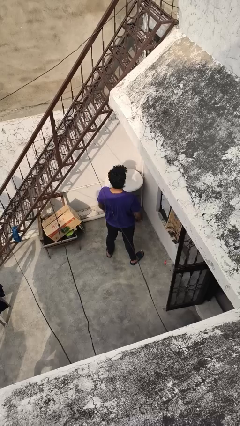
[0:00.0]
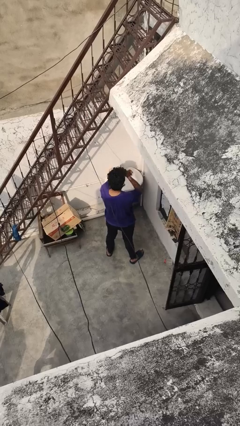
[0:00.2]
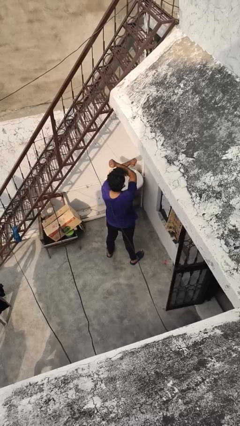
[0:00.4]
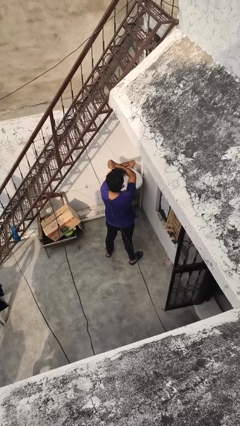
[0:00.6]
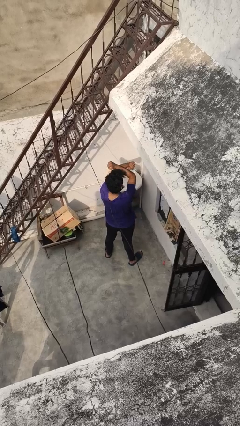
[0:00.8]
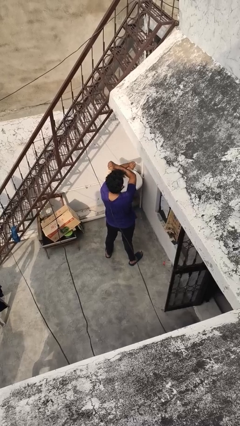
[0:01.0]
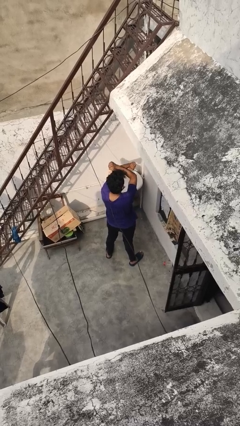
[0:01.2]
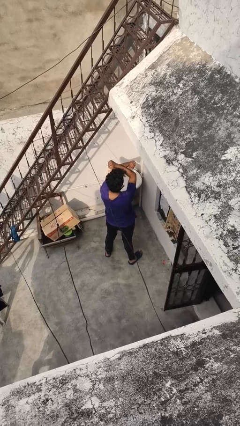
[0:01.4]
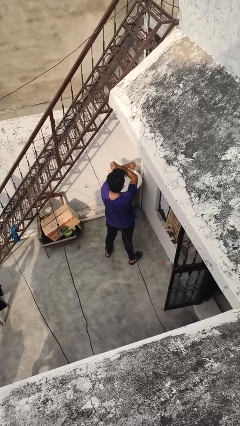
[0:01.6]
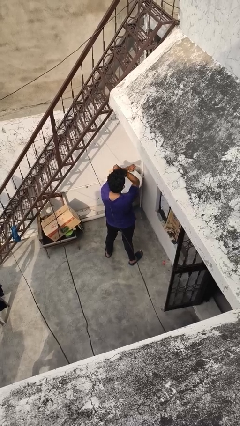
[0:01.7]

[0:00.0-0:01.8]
person gestures arms x

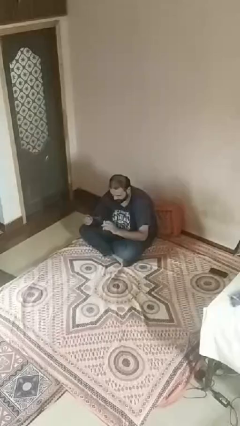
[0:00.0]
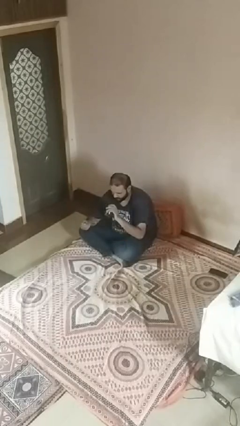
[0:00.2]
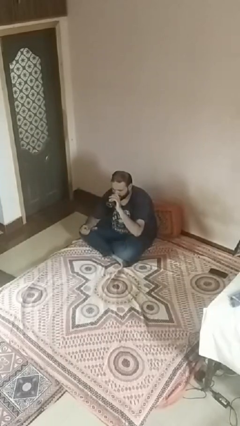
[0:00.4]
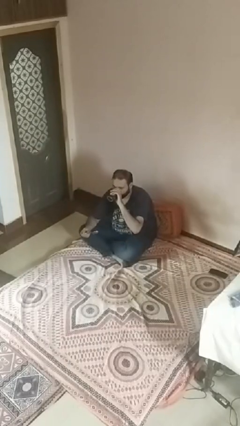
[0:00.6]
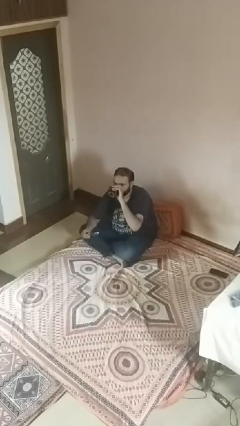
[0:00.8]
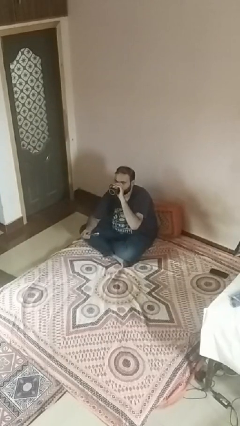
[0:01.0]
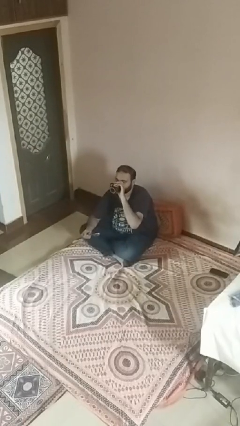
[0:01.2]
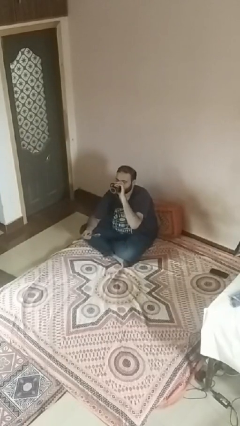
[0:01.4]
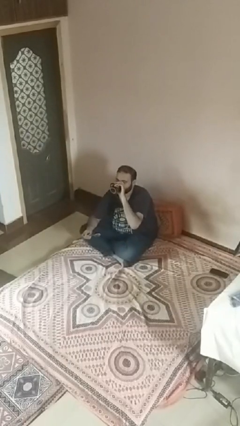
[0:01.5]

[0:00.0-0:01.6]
person drinks from mug

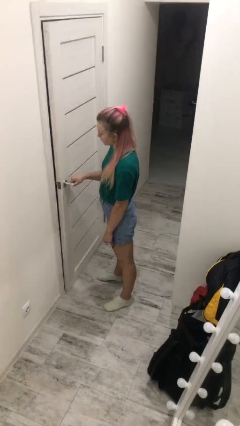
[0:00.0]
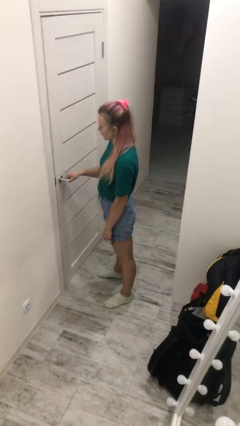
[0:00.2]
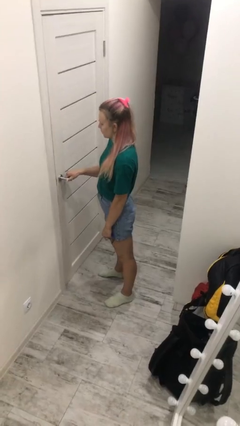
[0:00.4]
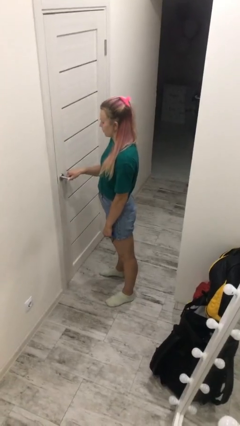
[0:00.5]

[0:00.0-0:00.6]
person closes facility door

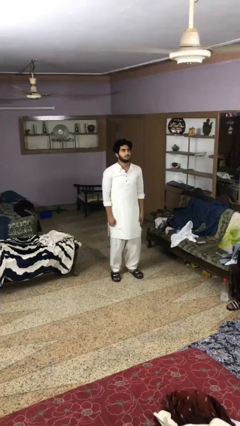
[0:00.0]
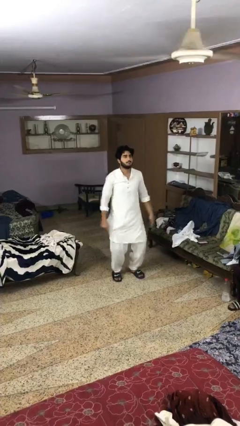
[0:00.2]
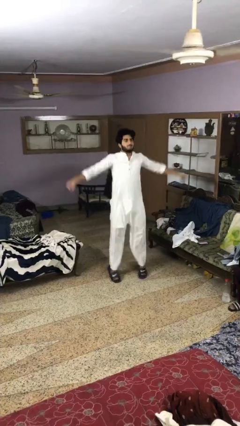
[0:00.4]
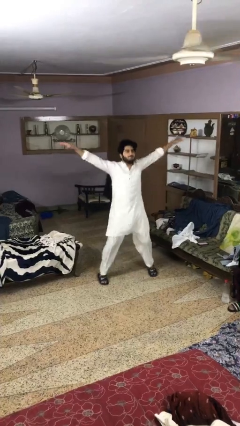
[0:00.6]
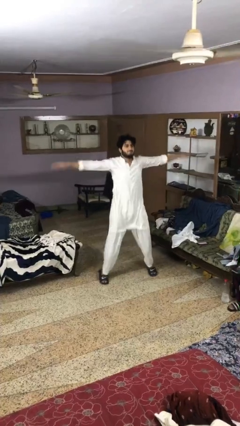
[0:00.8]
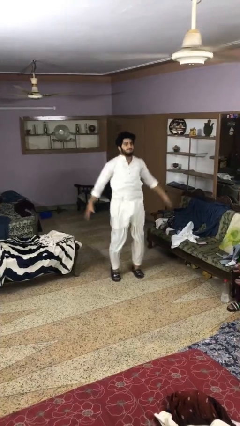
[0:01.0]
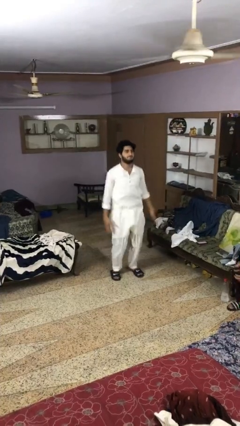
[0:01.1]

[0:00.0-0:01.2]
person exercises with jumping jacks

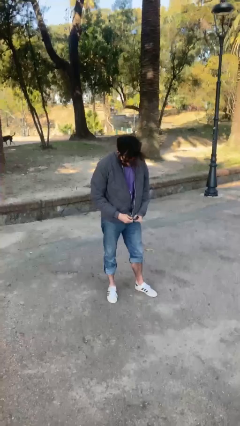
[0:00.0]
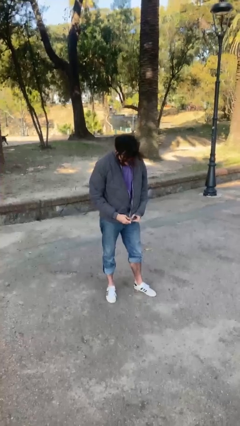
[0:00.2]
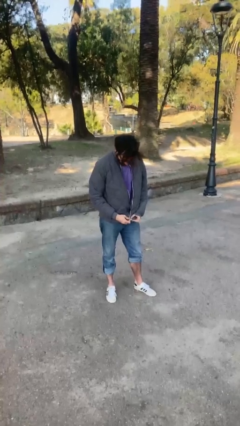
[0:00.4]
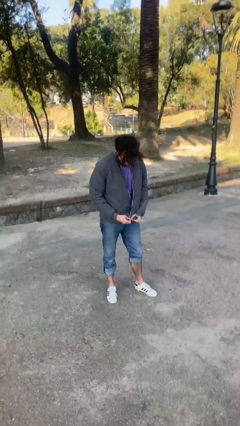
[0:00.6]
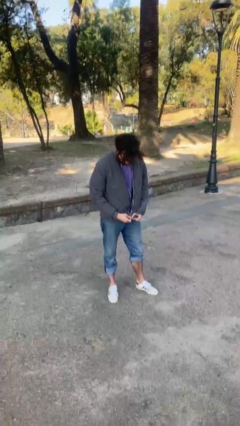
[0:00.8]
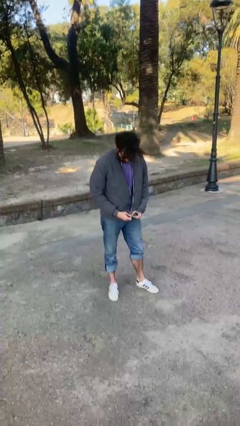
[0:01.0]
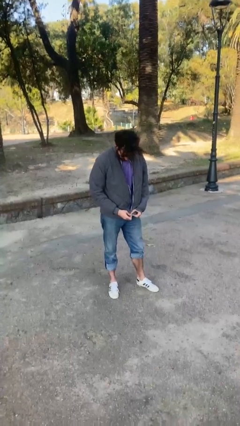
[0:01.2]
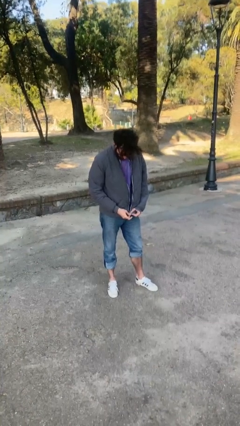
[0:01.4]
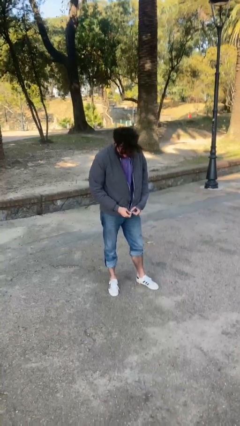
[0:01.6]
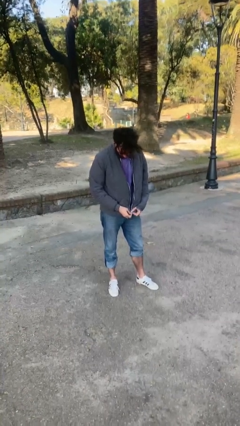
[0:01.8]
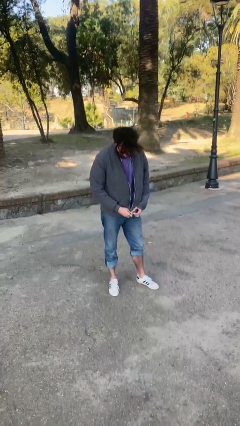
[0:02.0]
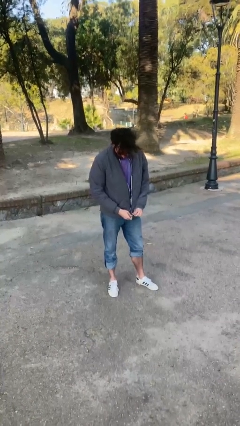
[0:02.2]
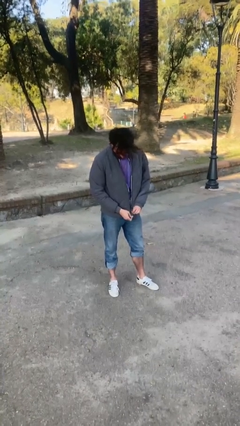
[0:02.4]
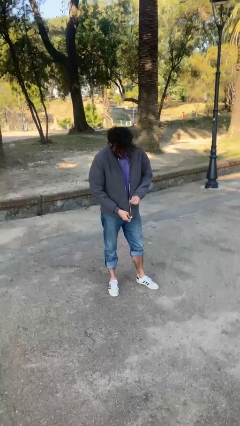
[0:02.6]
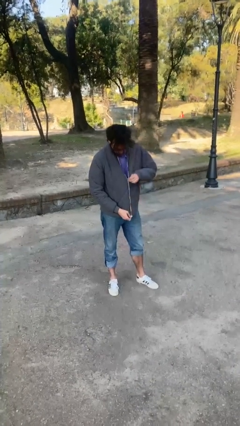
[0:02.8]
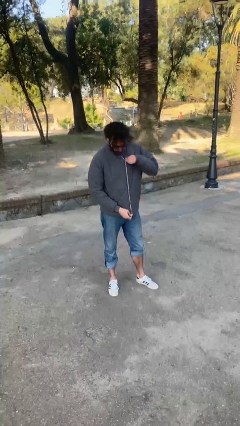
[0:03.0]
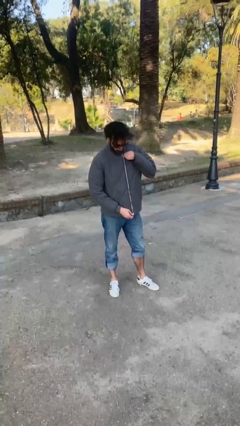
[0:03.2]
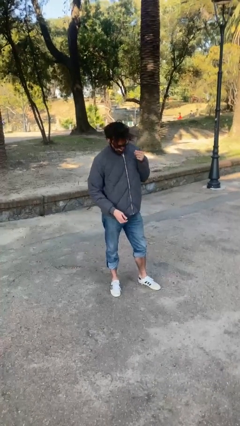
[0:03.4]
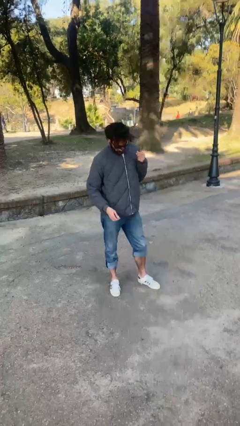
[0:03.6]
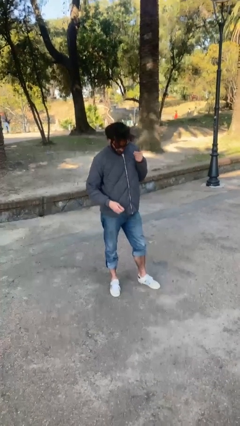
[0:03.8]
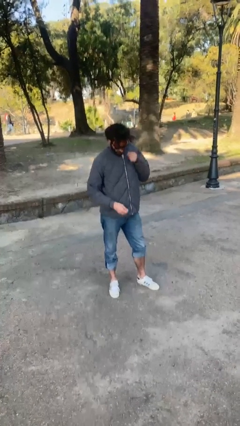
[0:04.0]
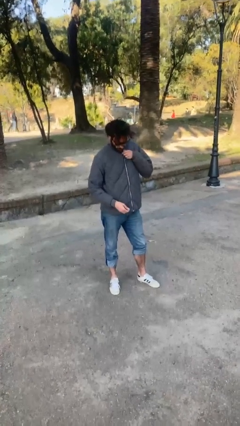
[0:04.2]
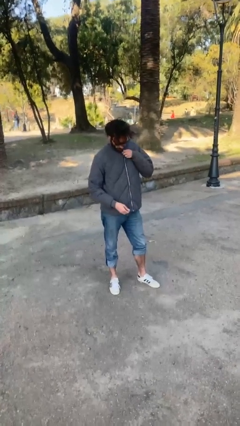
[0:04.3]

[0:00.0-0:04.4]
person zips up jacket

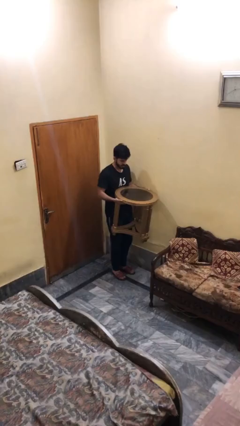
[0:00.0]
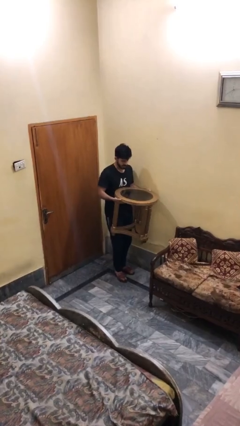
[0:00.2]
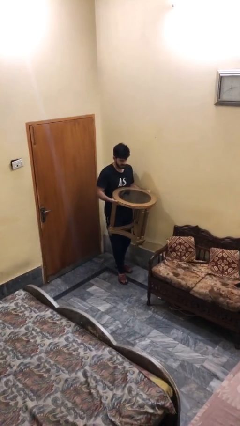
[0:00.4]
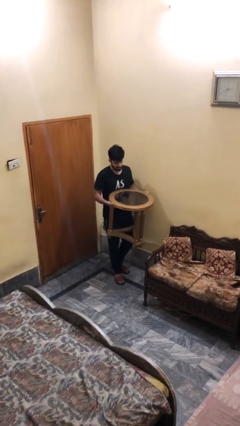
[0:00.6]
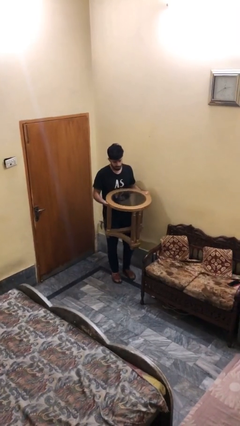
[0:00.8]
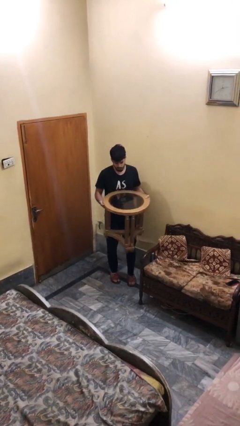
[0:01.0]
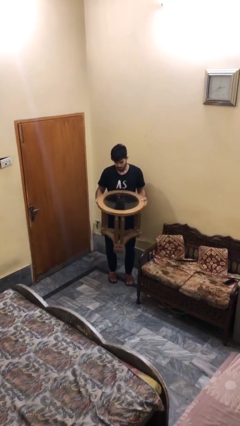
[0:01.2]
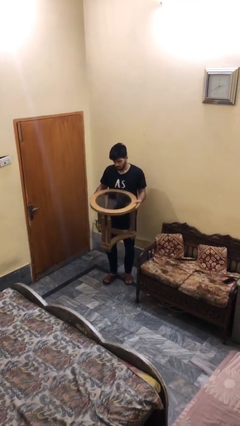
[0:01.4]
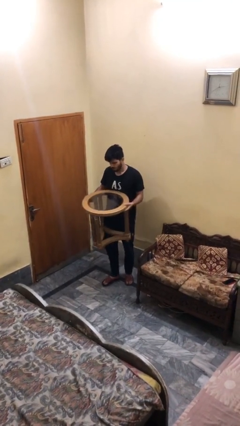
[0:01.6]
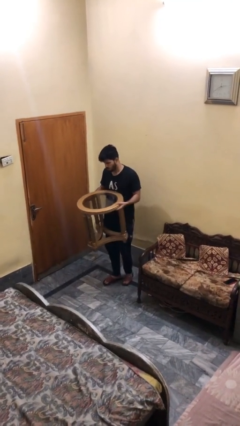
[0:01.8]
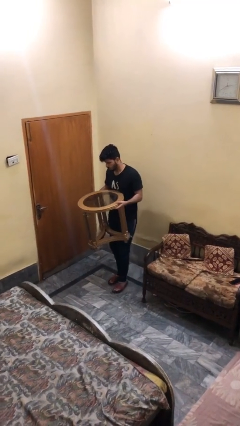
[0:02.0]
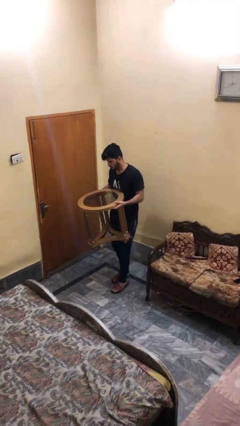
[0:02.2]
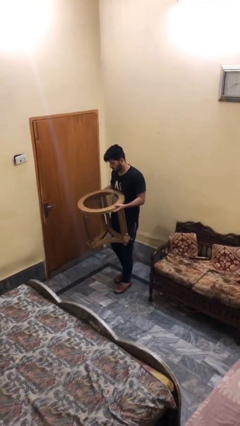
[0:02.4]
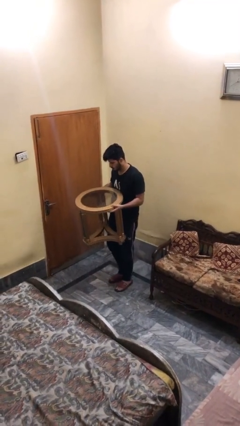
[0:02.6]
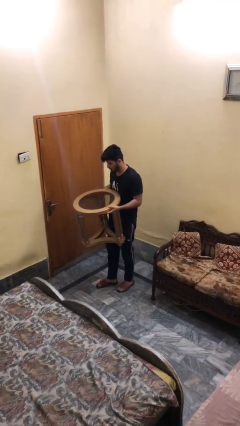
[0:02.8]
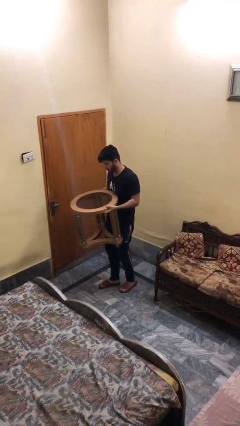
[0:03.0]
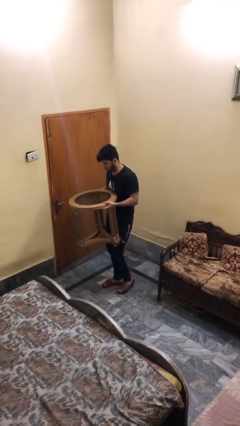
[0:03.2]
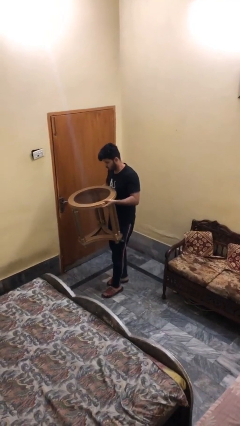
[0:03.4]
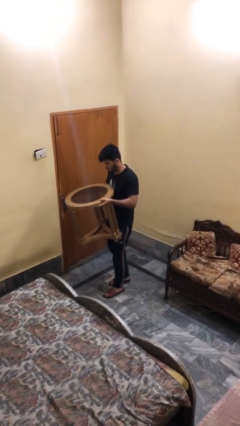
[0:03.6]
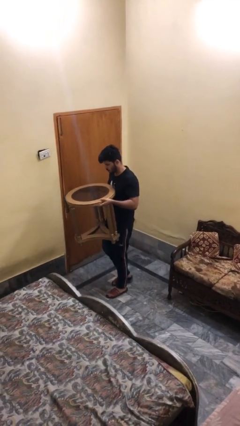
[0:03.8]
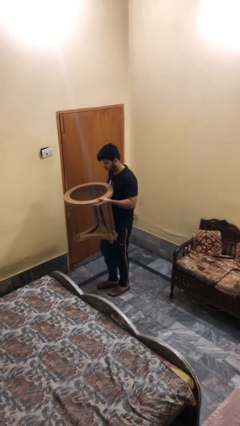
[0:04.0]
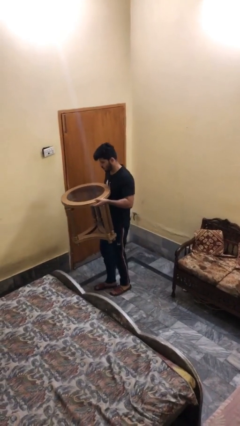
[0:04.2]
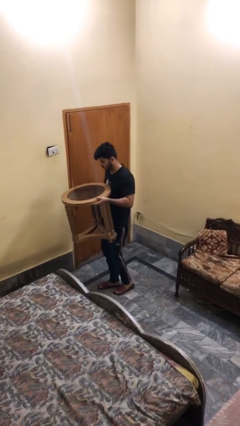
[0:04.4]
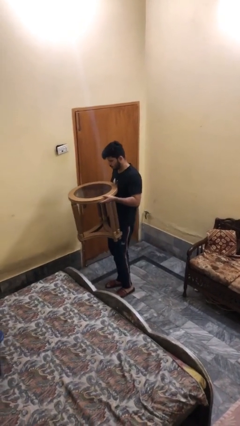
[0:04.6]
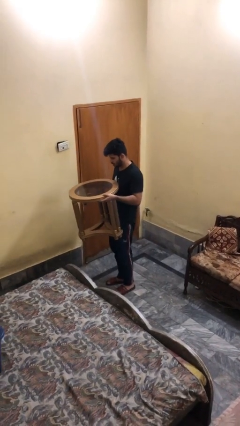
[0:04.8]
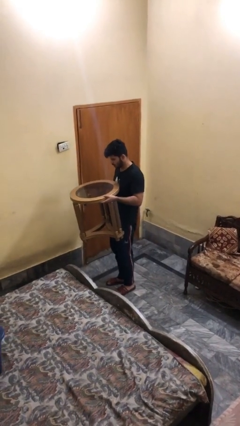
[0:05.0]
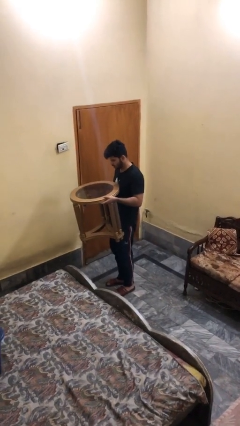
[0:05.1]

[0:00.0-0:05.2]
person carries furniture

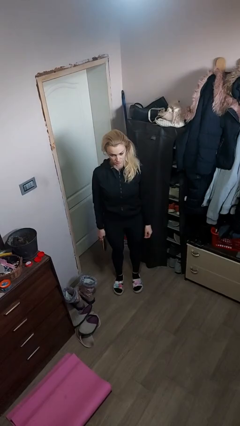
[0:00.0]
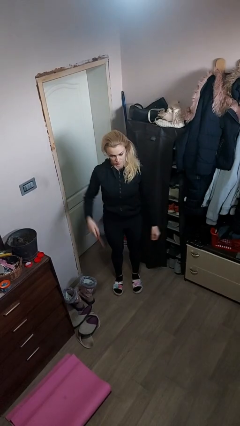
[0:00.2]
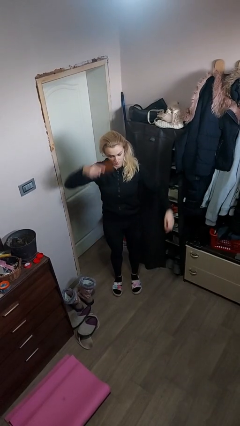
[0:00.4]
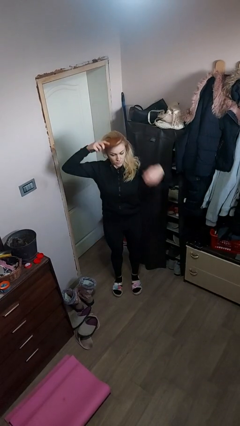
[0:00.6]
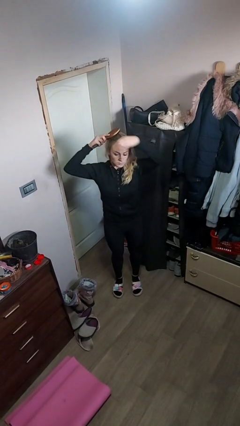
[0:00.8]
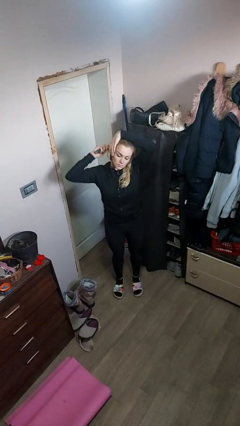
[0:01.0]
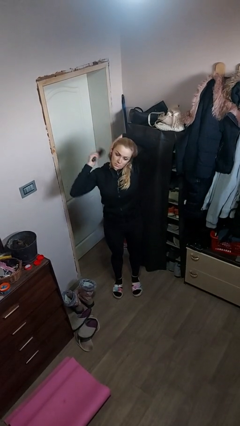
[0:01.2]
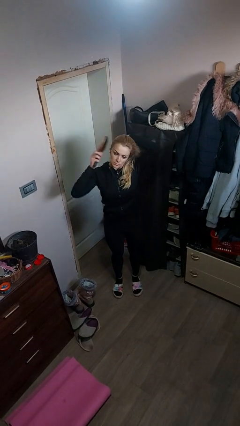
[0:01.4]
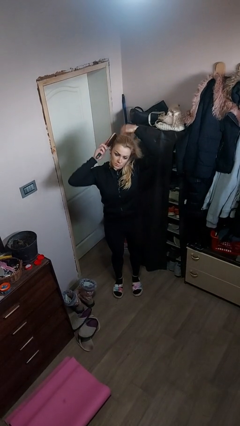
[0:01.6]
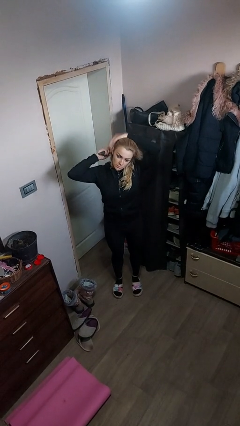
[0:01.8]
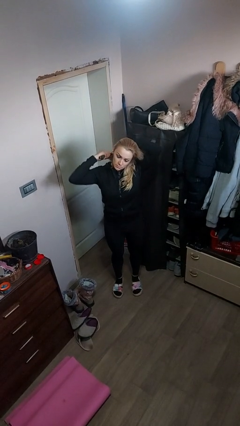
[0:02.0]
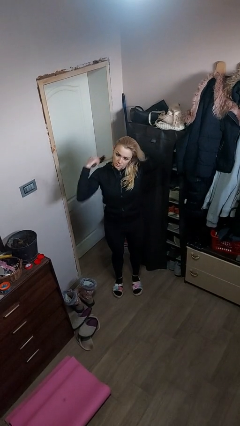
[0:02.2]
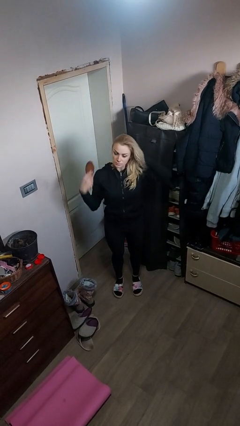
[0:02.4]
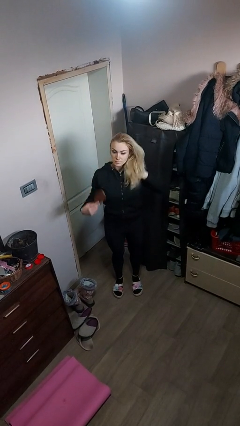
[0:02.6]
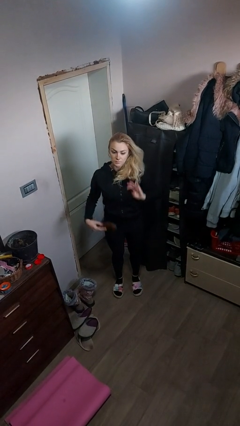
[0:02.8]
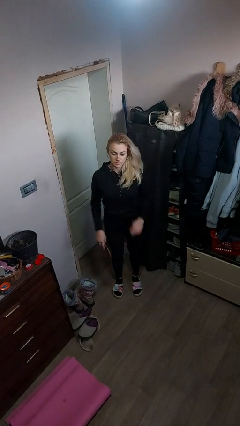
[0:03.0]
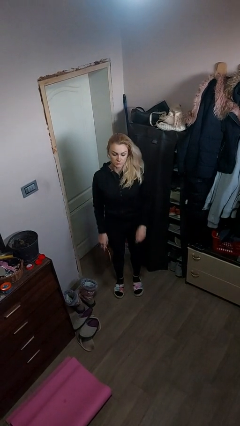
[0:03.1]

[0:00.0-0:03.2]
person brushes hair
